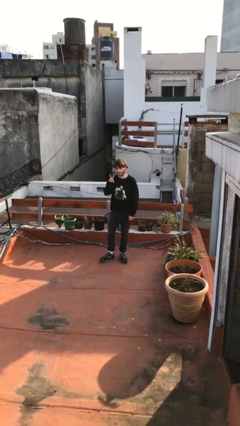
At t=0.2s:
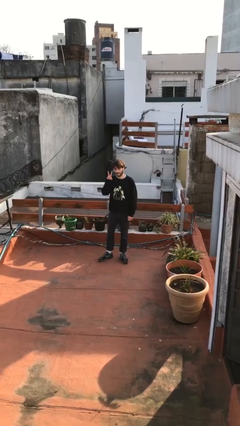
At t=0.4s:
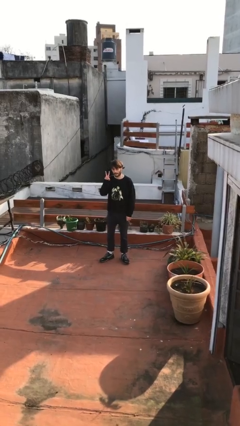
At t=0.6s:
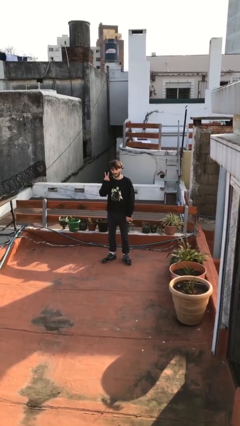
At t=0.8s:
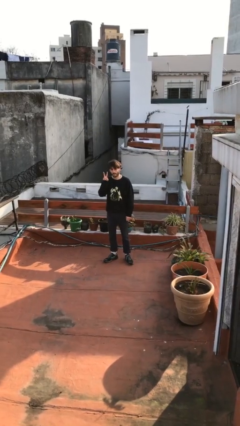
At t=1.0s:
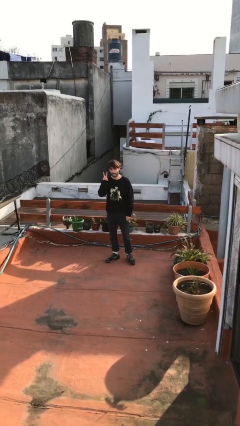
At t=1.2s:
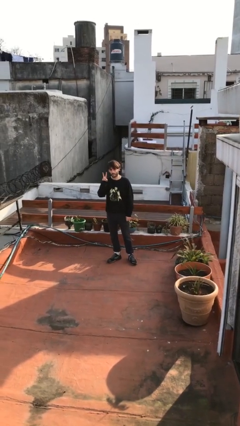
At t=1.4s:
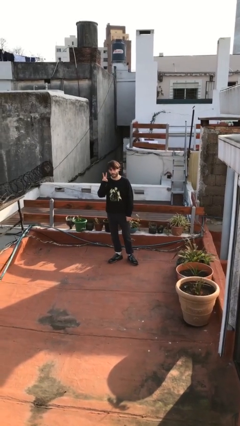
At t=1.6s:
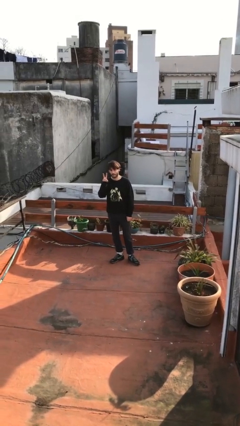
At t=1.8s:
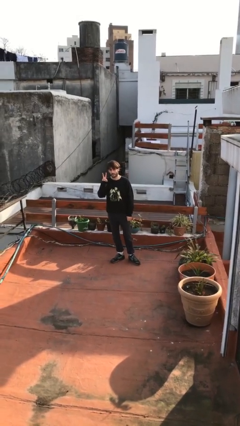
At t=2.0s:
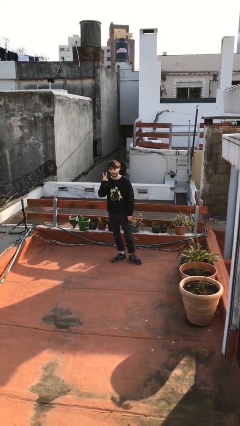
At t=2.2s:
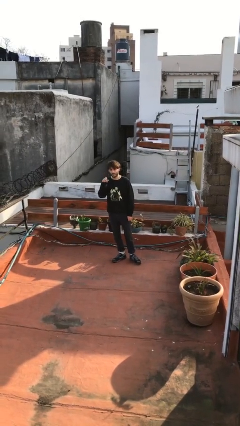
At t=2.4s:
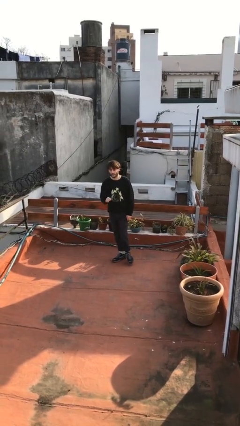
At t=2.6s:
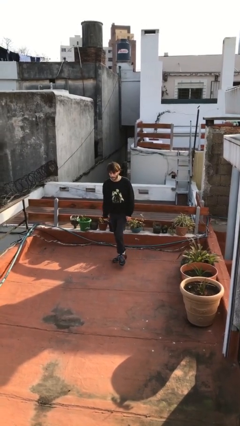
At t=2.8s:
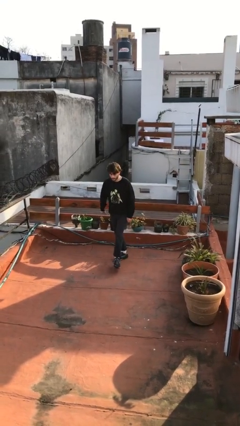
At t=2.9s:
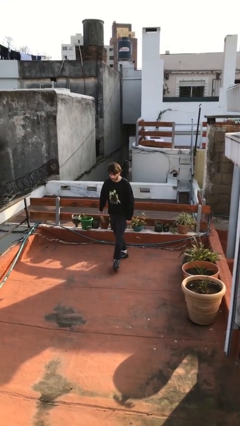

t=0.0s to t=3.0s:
person gestures peace

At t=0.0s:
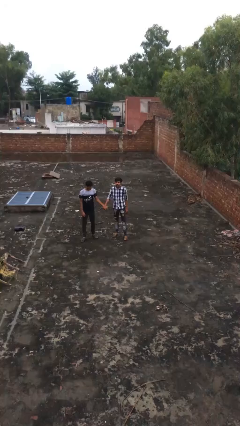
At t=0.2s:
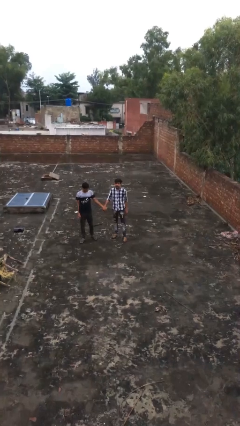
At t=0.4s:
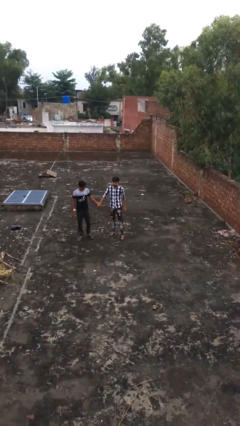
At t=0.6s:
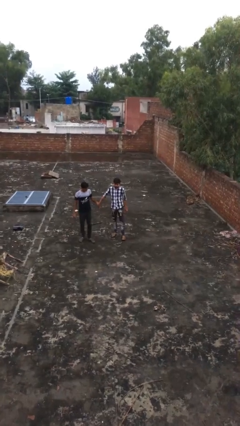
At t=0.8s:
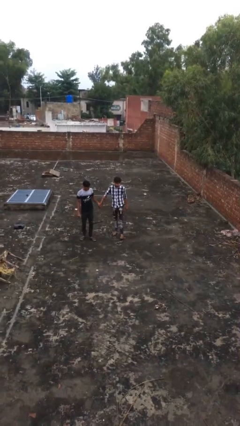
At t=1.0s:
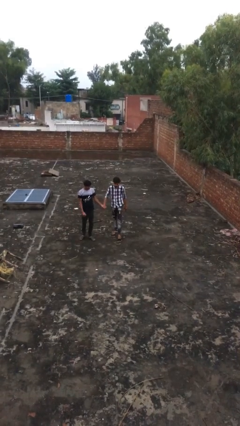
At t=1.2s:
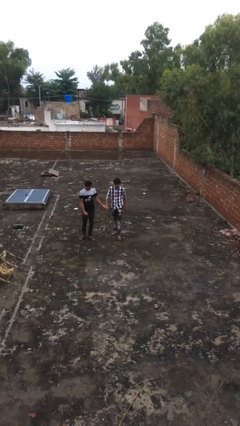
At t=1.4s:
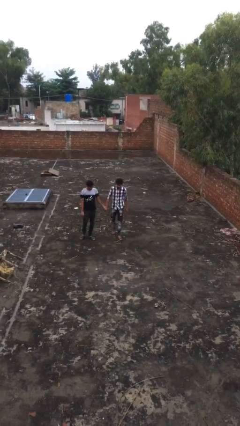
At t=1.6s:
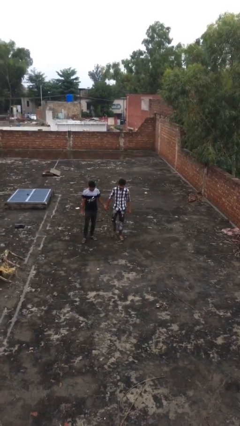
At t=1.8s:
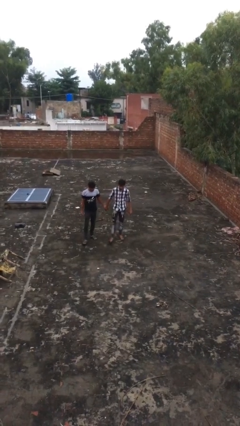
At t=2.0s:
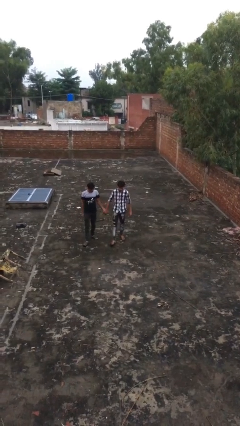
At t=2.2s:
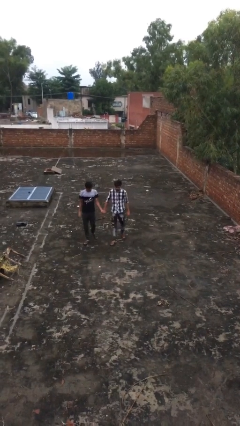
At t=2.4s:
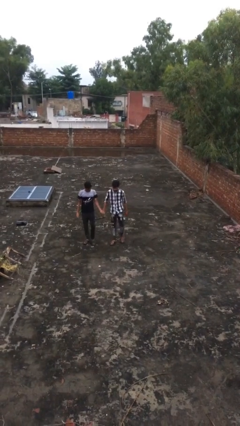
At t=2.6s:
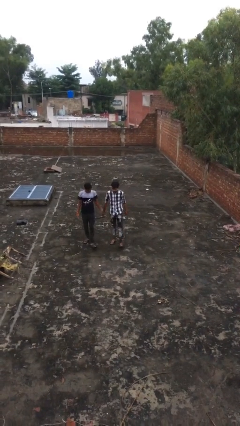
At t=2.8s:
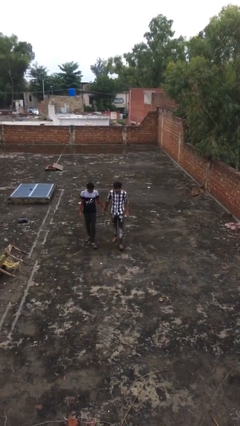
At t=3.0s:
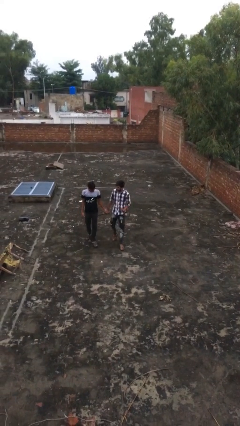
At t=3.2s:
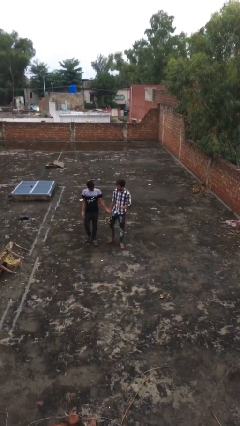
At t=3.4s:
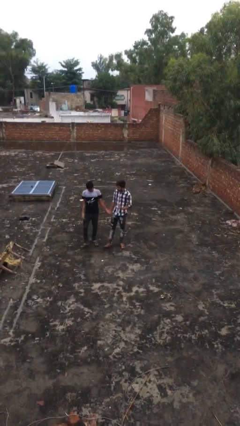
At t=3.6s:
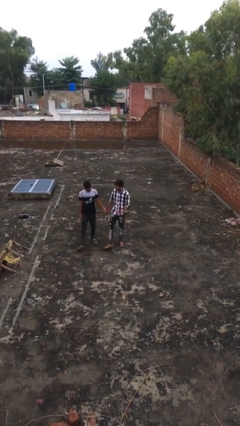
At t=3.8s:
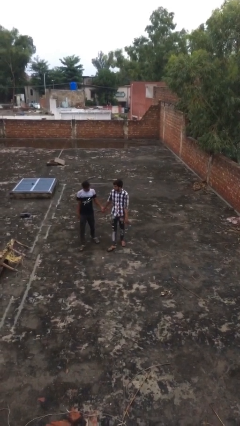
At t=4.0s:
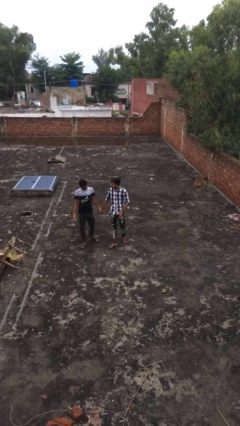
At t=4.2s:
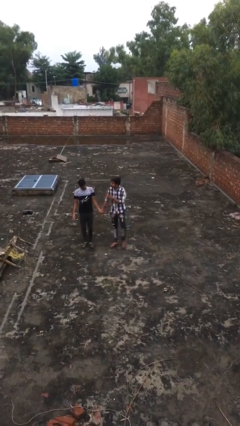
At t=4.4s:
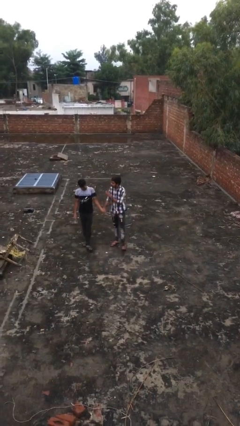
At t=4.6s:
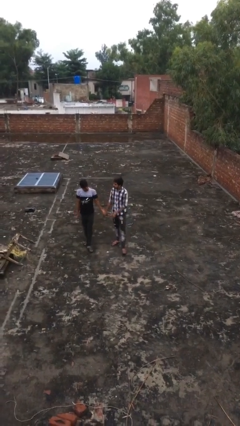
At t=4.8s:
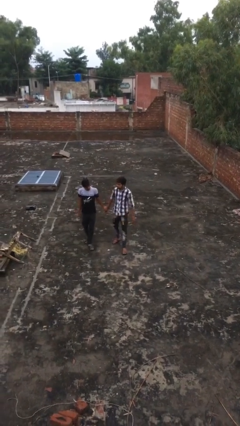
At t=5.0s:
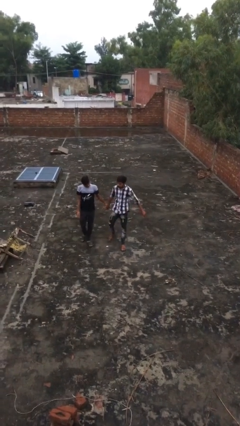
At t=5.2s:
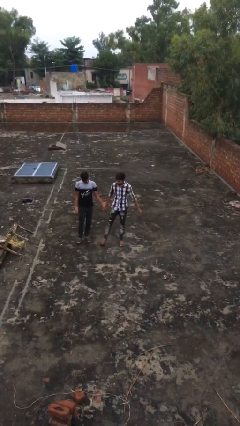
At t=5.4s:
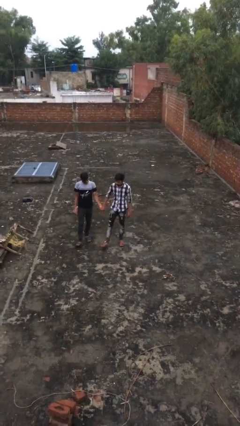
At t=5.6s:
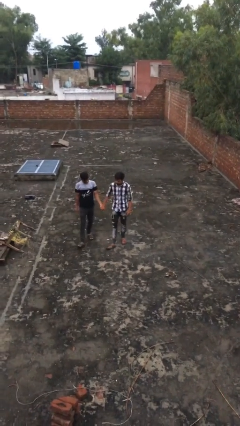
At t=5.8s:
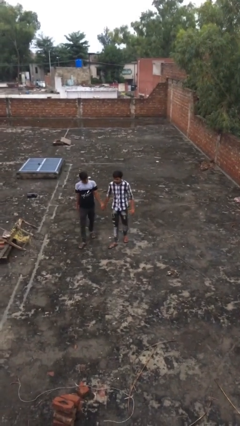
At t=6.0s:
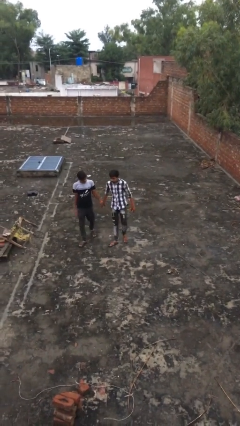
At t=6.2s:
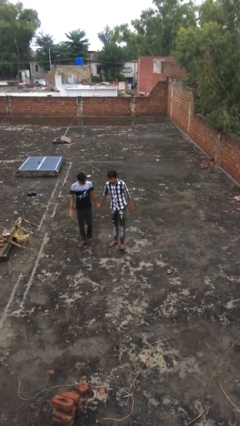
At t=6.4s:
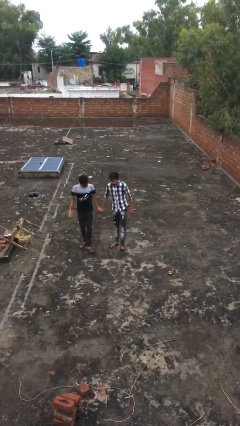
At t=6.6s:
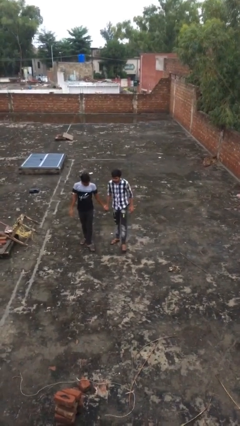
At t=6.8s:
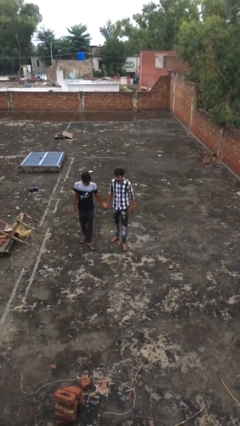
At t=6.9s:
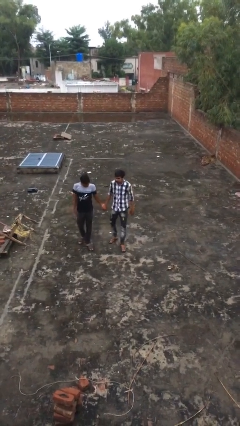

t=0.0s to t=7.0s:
person holds hand

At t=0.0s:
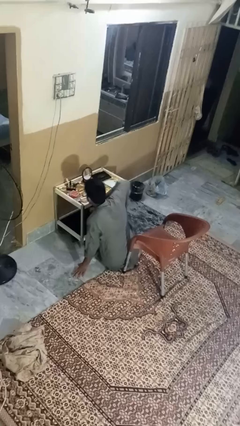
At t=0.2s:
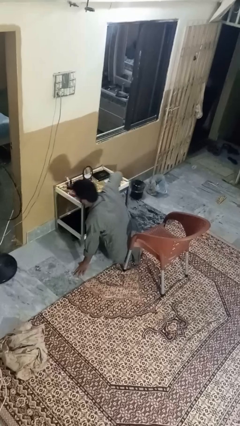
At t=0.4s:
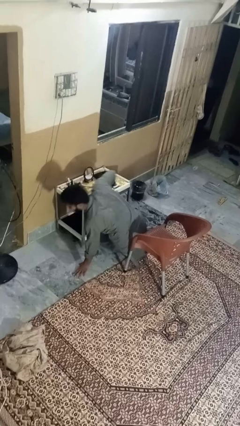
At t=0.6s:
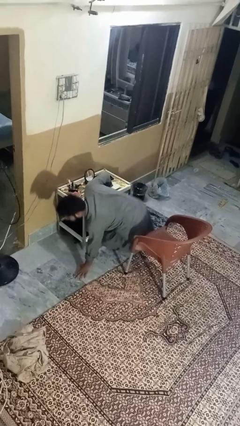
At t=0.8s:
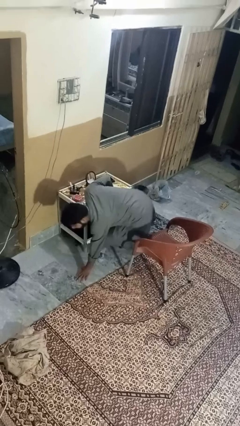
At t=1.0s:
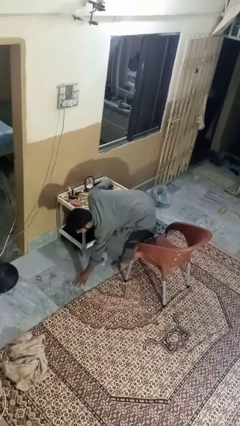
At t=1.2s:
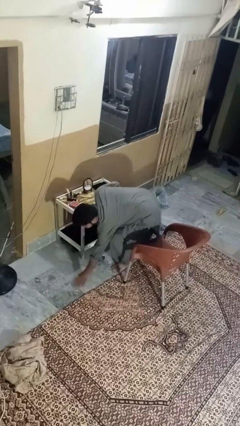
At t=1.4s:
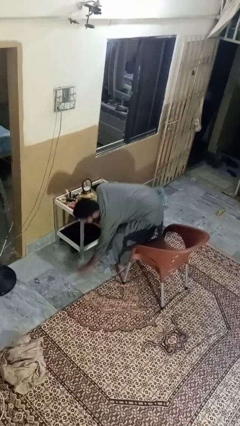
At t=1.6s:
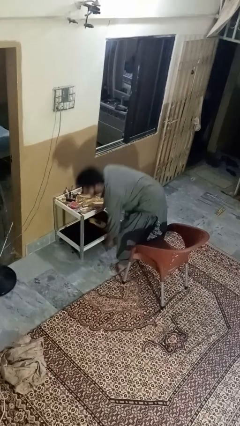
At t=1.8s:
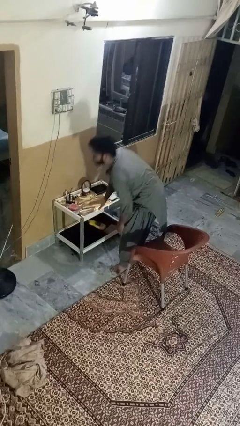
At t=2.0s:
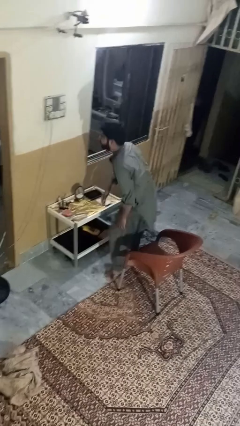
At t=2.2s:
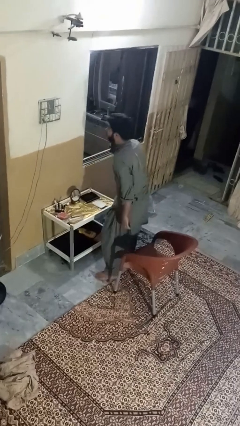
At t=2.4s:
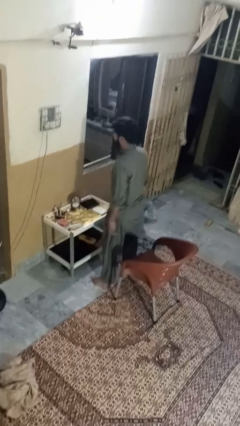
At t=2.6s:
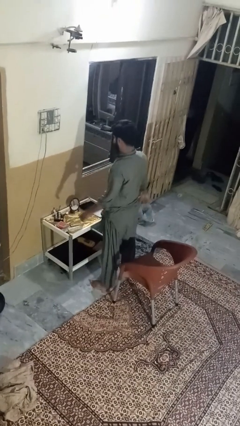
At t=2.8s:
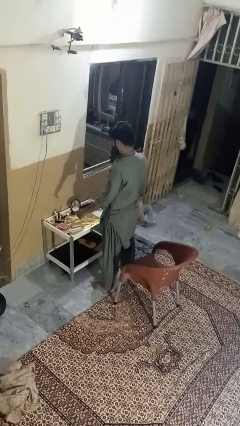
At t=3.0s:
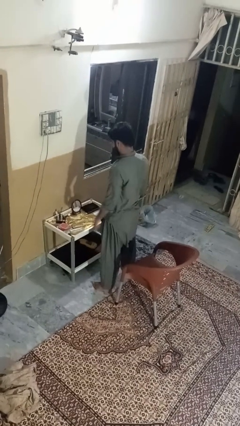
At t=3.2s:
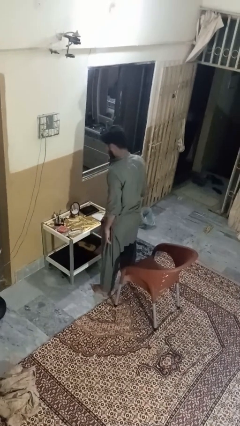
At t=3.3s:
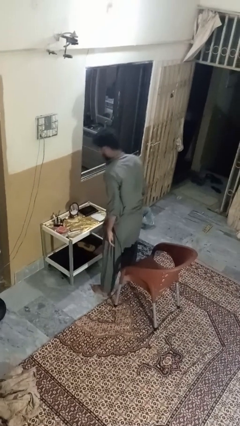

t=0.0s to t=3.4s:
person stands up from floor

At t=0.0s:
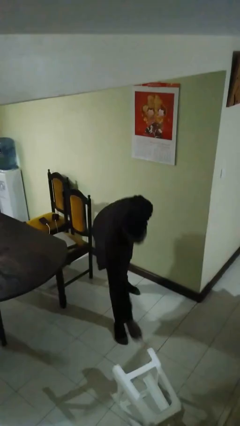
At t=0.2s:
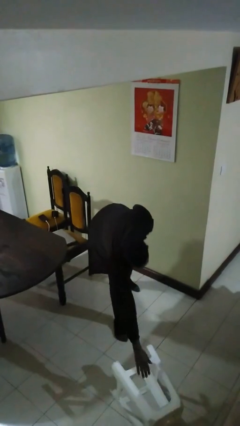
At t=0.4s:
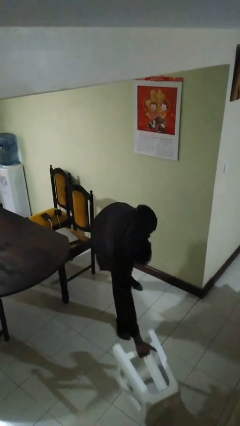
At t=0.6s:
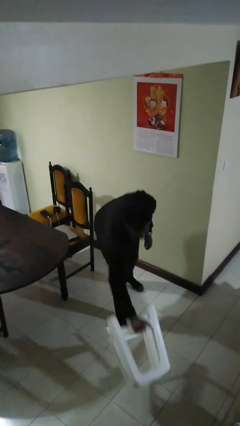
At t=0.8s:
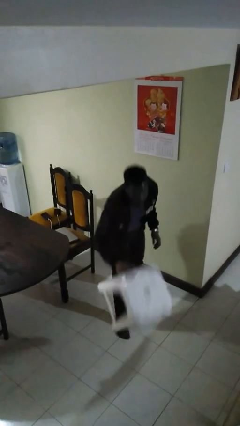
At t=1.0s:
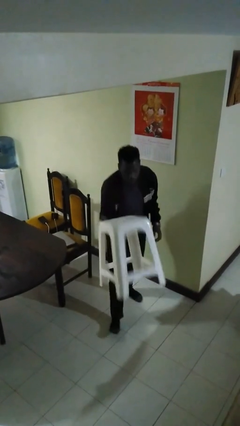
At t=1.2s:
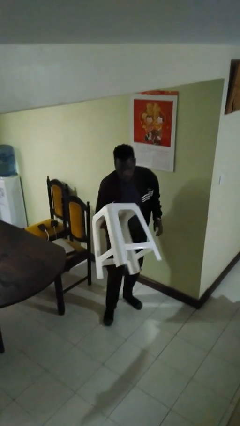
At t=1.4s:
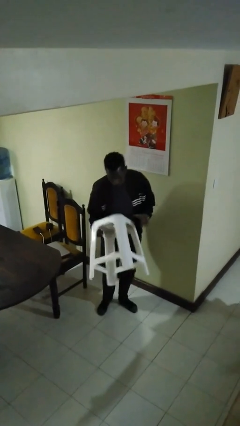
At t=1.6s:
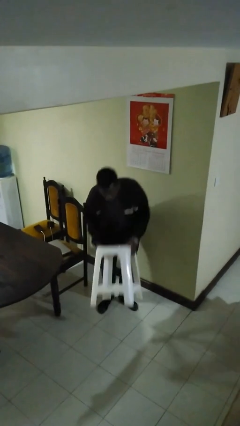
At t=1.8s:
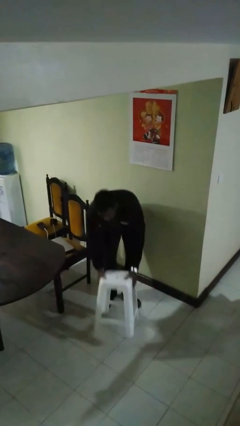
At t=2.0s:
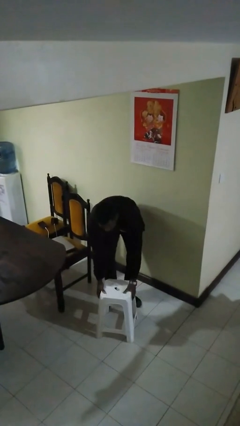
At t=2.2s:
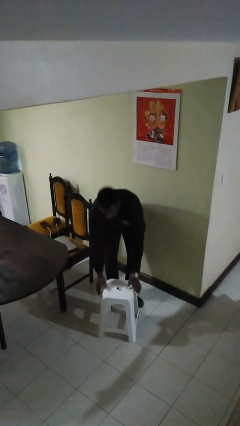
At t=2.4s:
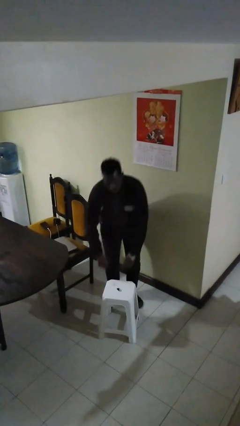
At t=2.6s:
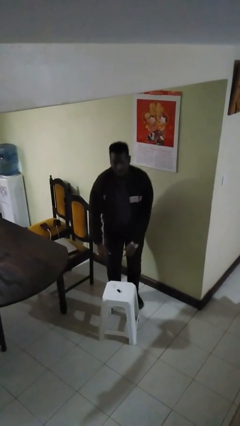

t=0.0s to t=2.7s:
person sets upright furniture

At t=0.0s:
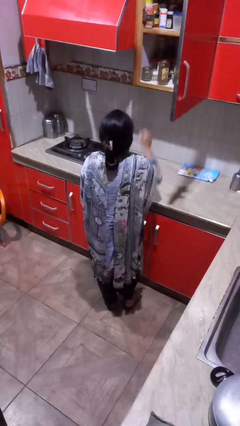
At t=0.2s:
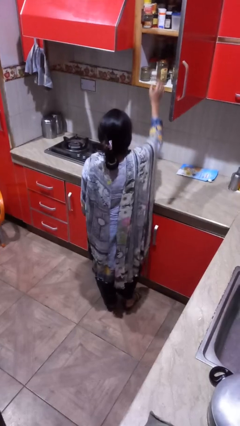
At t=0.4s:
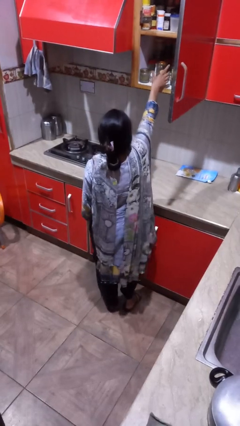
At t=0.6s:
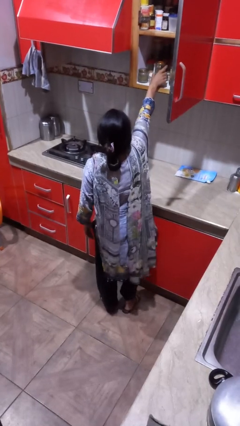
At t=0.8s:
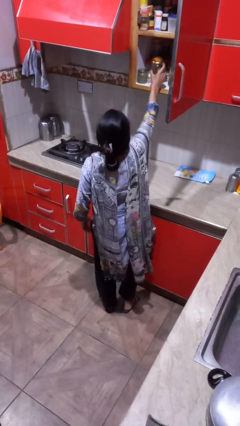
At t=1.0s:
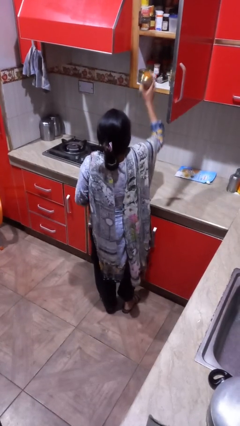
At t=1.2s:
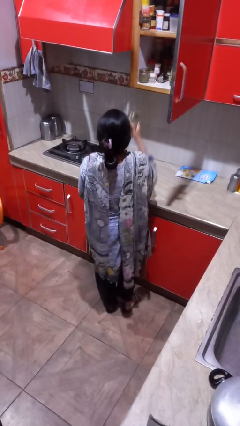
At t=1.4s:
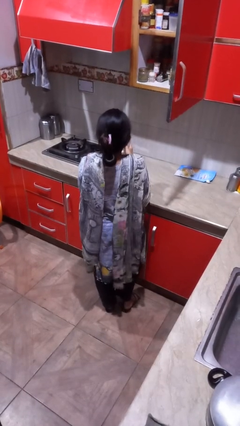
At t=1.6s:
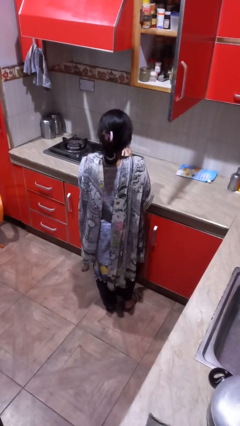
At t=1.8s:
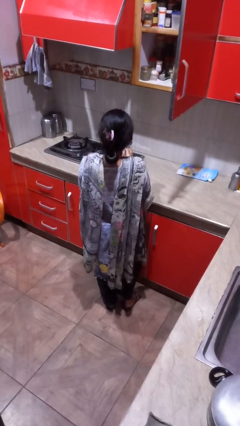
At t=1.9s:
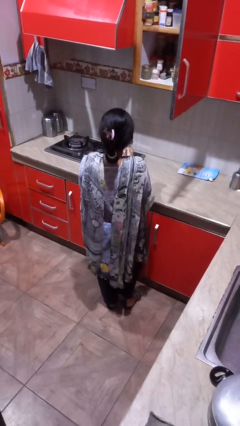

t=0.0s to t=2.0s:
person takes object from cabinet
